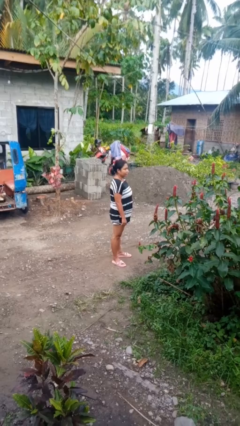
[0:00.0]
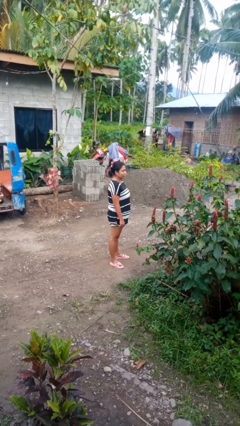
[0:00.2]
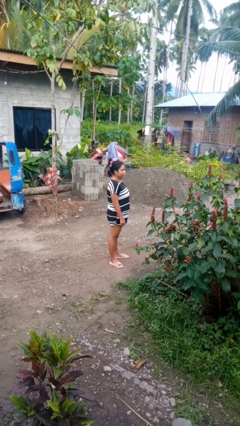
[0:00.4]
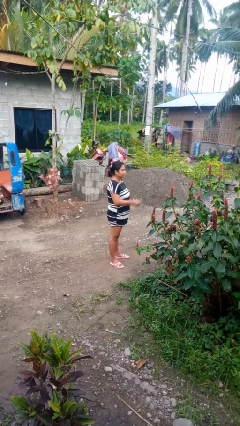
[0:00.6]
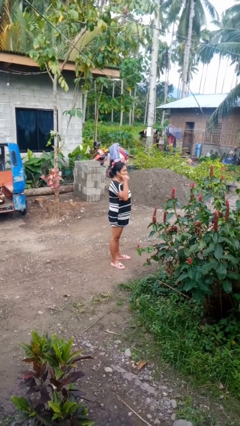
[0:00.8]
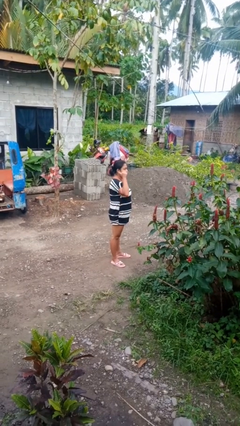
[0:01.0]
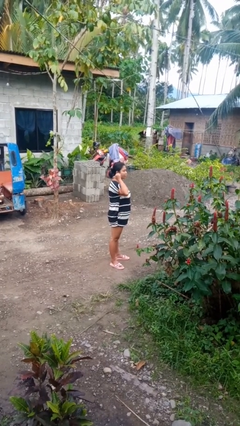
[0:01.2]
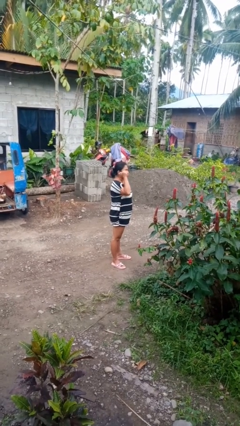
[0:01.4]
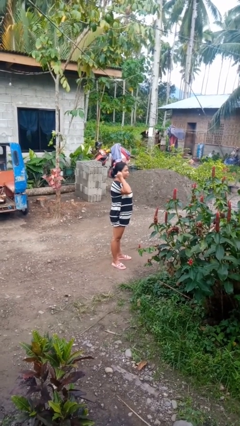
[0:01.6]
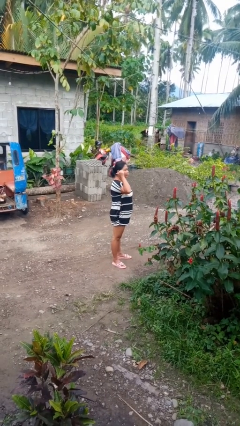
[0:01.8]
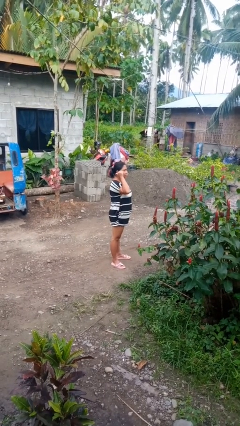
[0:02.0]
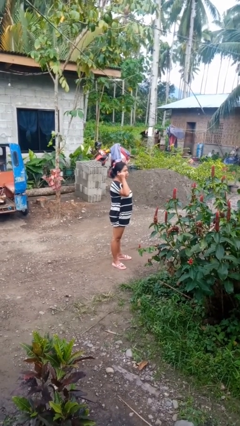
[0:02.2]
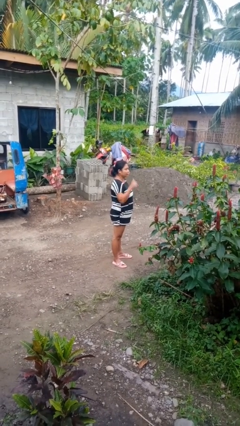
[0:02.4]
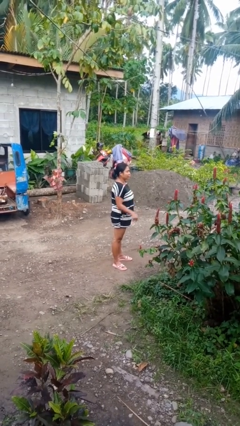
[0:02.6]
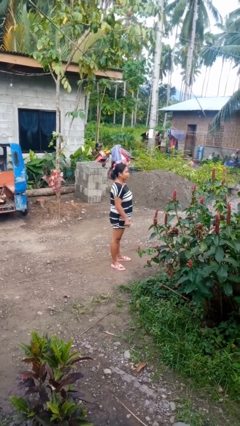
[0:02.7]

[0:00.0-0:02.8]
person gestures behind me

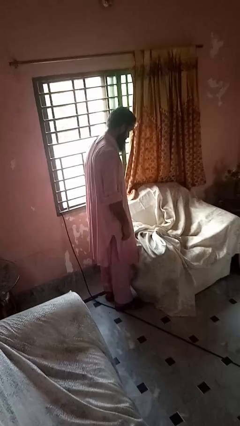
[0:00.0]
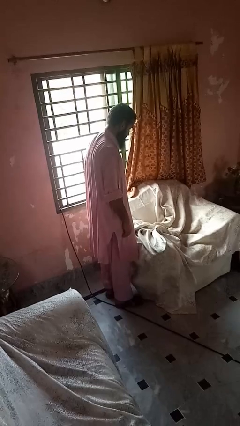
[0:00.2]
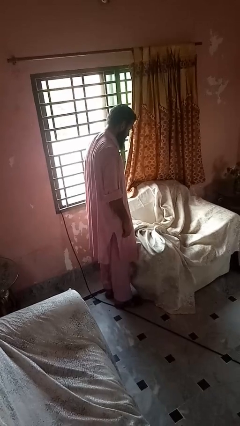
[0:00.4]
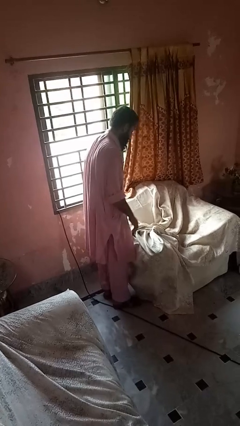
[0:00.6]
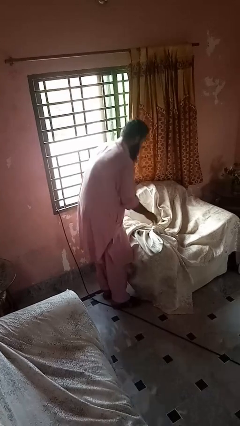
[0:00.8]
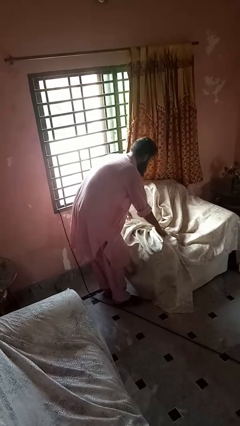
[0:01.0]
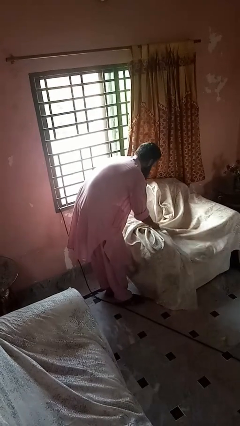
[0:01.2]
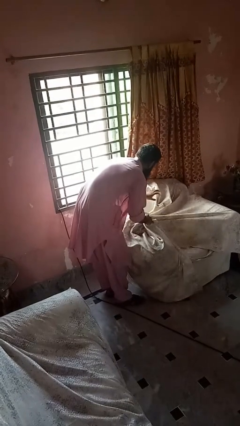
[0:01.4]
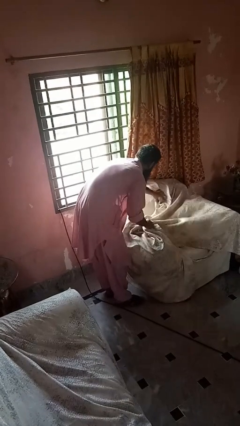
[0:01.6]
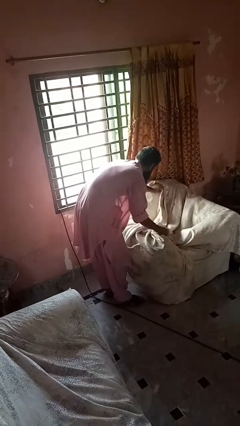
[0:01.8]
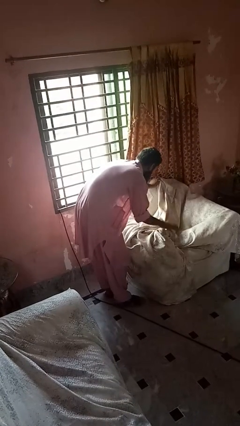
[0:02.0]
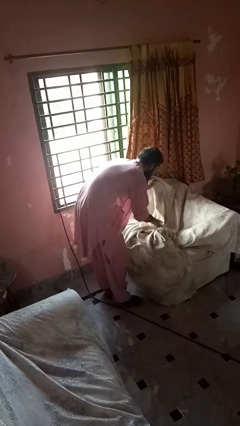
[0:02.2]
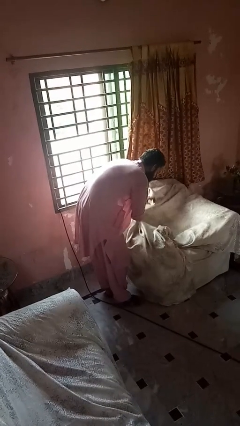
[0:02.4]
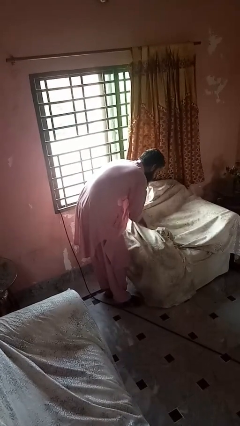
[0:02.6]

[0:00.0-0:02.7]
person searches in couch

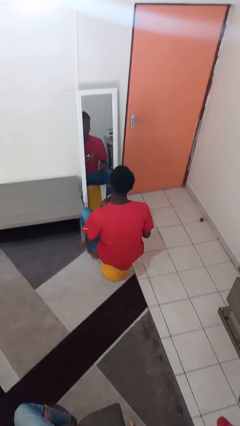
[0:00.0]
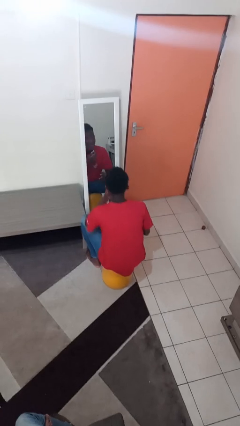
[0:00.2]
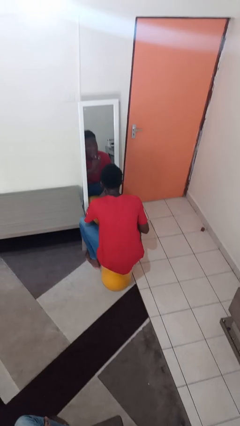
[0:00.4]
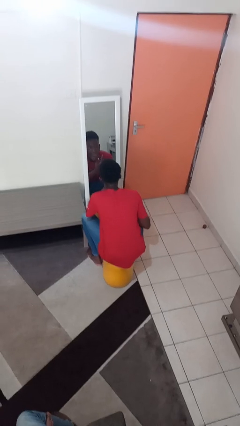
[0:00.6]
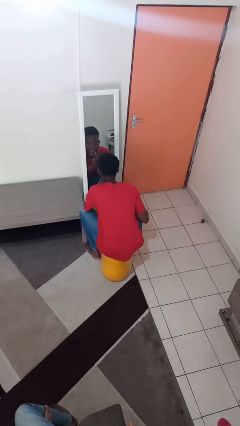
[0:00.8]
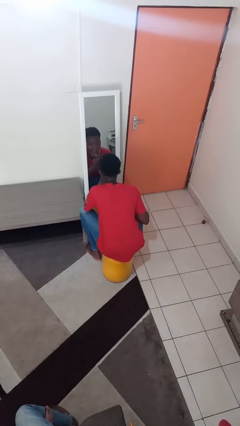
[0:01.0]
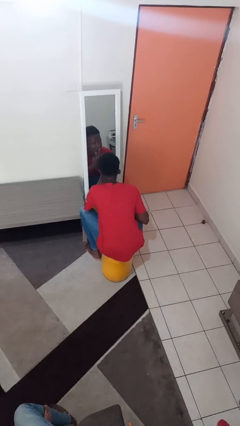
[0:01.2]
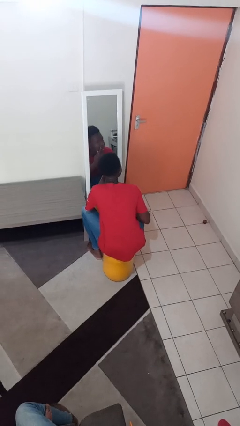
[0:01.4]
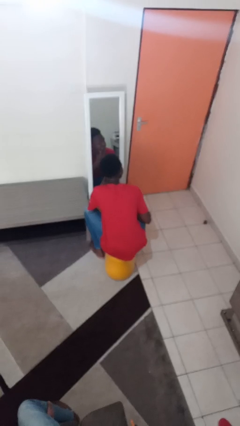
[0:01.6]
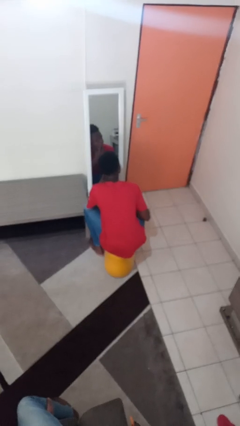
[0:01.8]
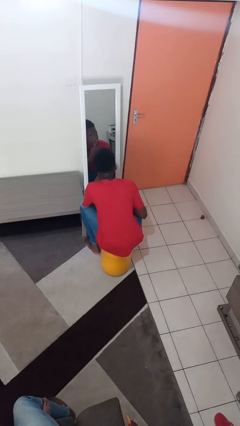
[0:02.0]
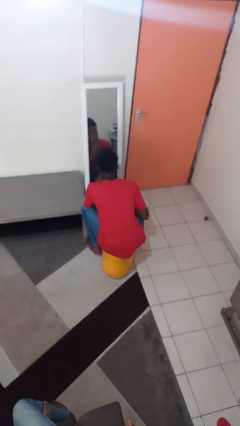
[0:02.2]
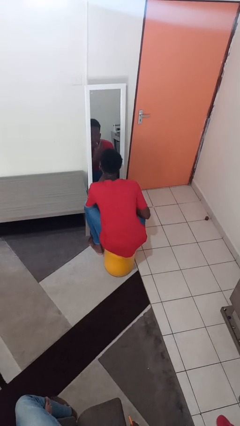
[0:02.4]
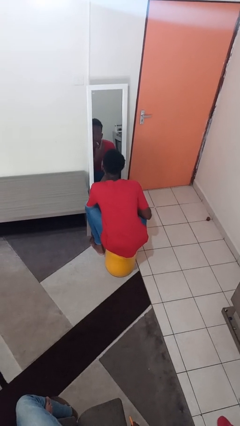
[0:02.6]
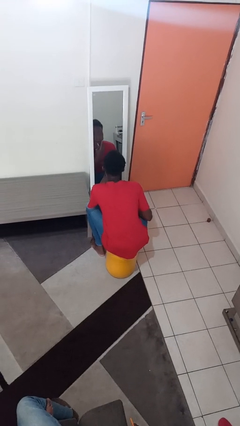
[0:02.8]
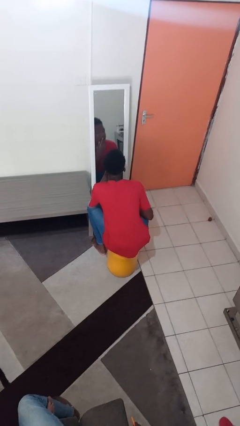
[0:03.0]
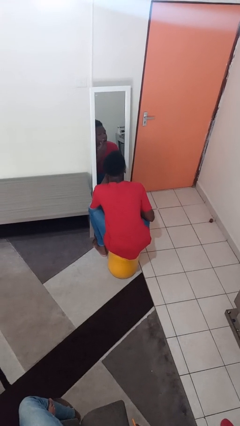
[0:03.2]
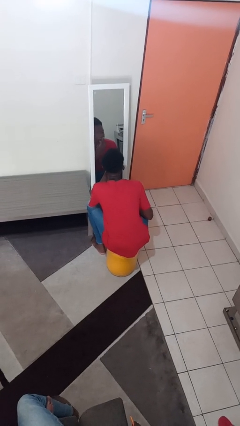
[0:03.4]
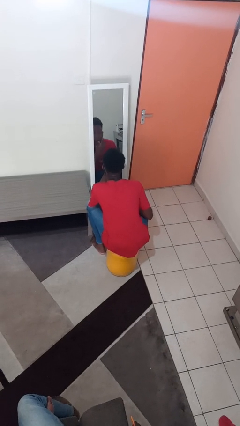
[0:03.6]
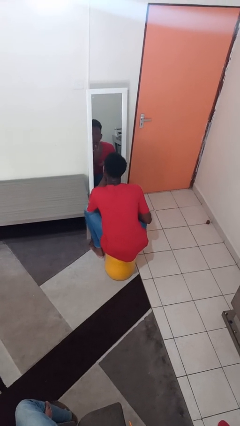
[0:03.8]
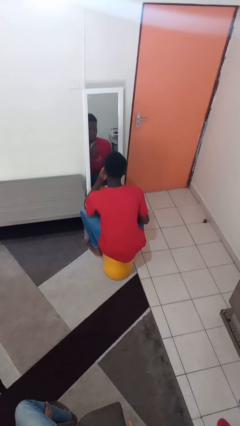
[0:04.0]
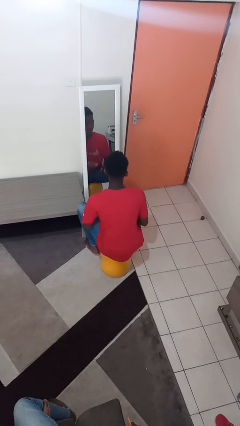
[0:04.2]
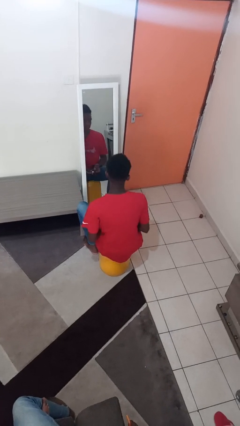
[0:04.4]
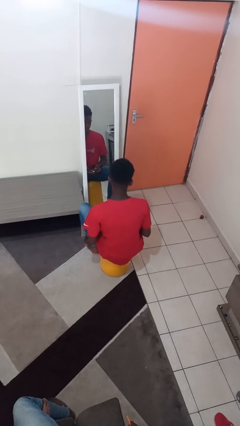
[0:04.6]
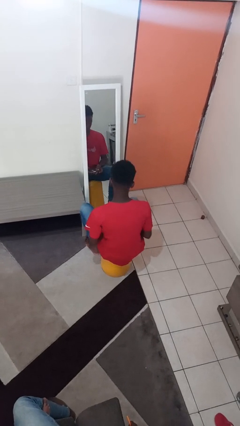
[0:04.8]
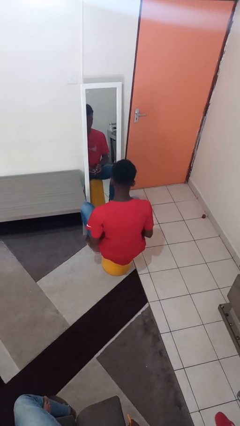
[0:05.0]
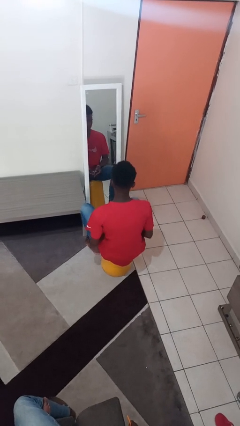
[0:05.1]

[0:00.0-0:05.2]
person applies lip makeup

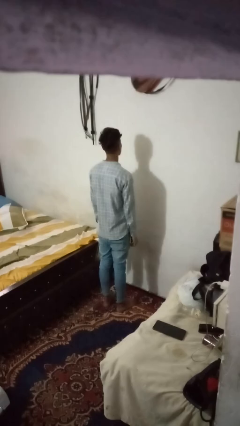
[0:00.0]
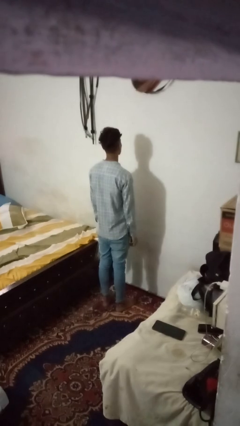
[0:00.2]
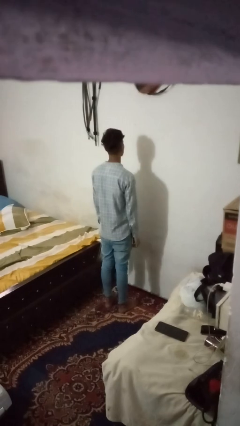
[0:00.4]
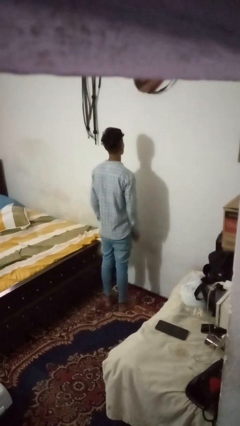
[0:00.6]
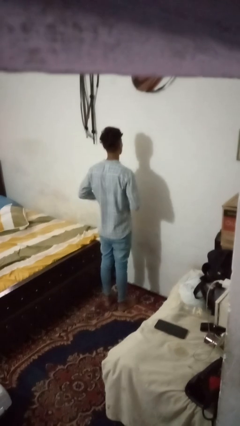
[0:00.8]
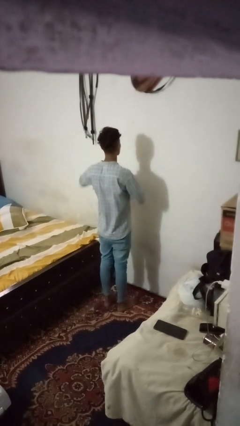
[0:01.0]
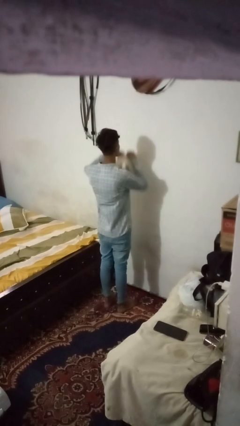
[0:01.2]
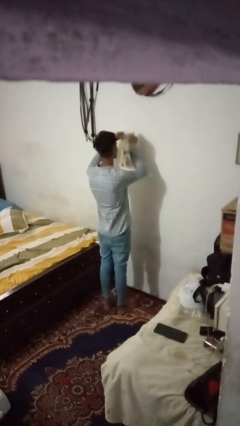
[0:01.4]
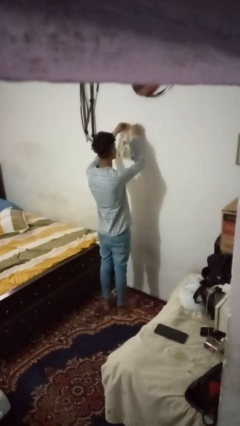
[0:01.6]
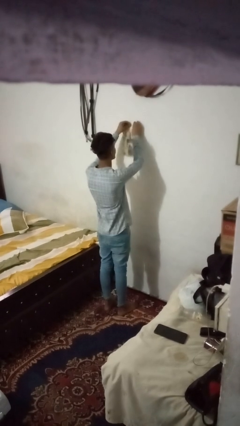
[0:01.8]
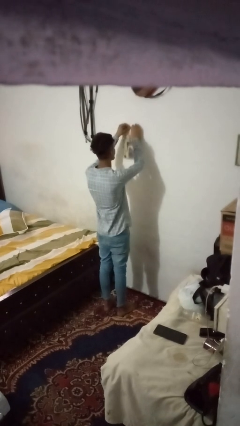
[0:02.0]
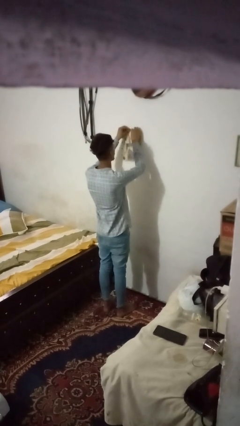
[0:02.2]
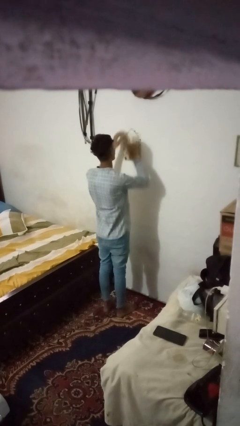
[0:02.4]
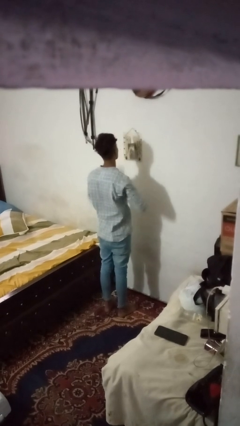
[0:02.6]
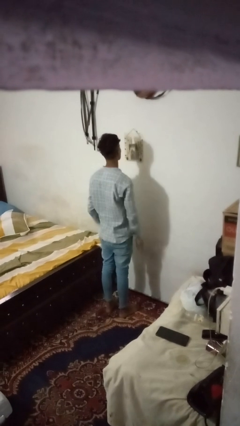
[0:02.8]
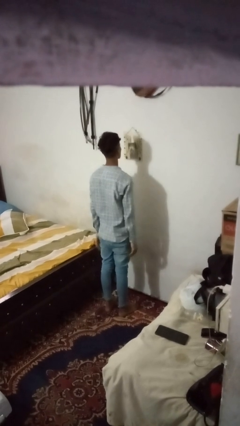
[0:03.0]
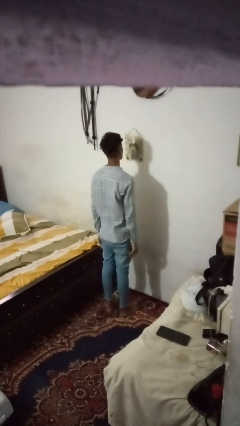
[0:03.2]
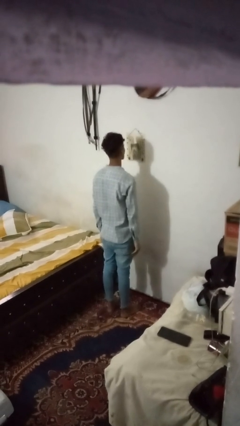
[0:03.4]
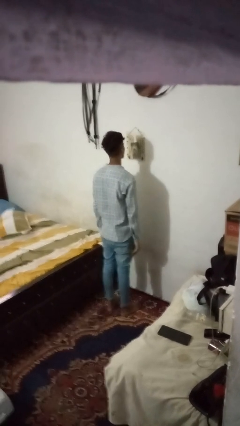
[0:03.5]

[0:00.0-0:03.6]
person puts up picture frame

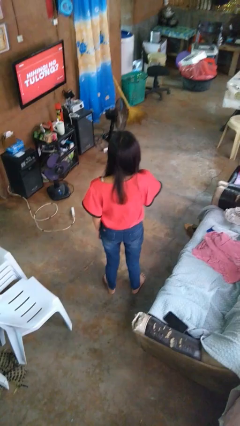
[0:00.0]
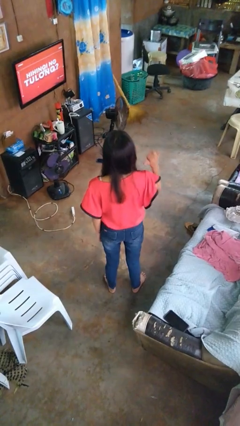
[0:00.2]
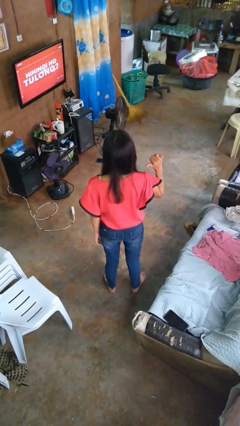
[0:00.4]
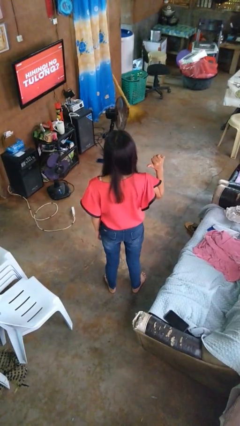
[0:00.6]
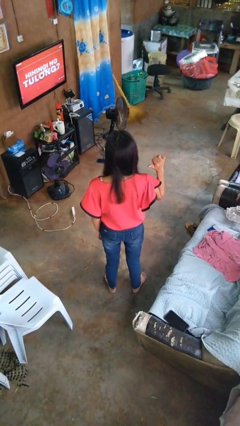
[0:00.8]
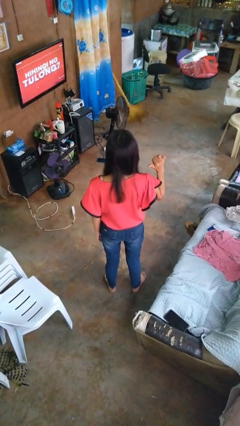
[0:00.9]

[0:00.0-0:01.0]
person gestures cut

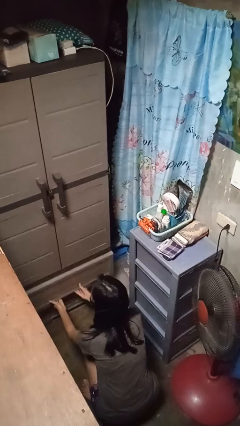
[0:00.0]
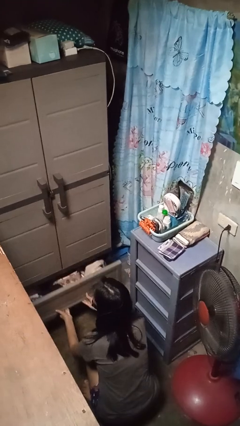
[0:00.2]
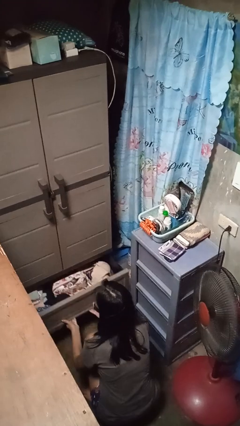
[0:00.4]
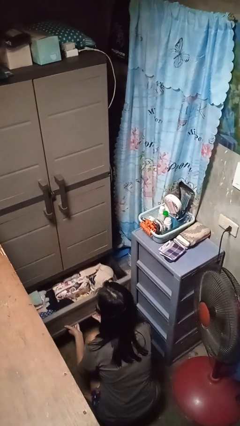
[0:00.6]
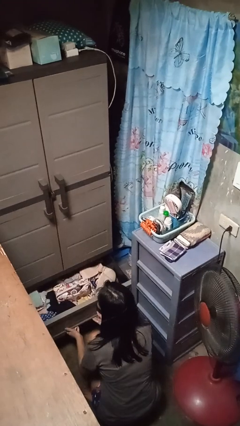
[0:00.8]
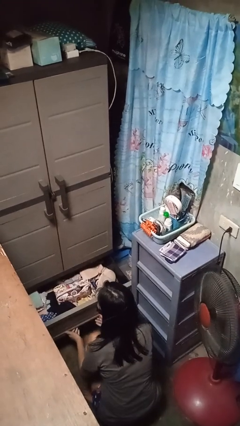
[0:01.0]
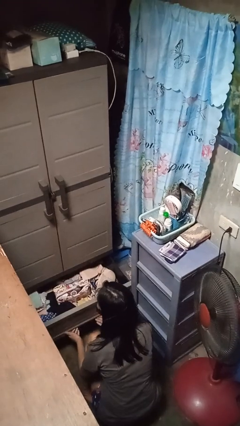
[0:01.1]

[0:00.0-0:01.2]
person opens dresser drawer

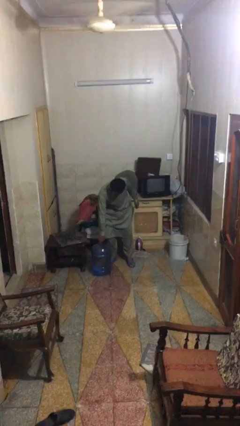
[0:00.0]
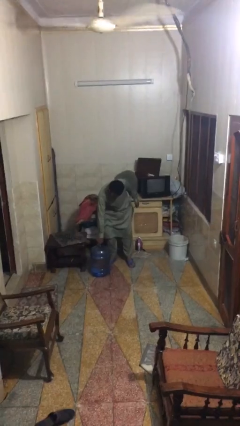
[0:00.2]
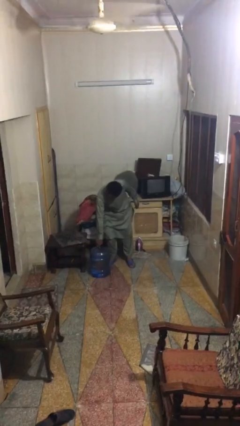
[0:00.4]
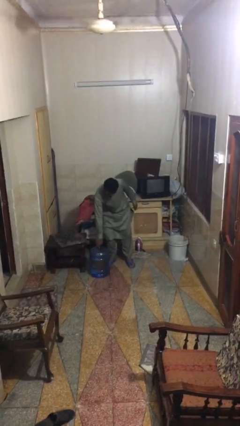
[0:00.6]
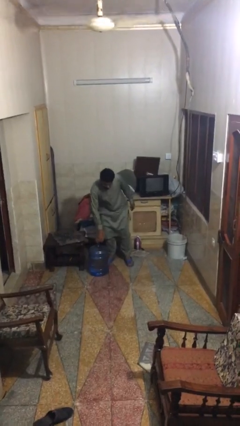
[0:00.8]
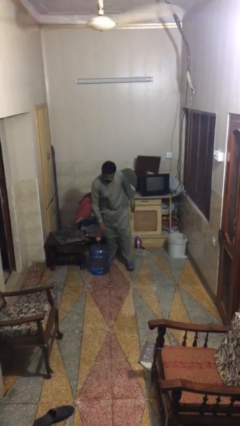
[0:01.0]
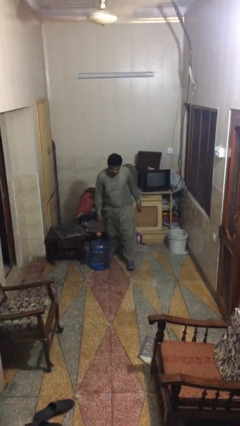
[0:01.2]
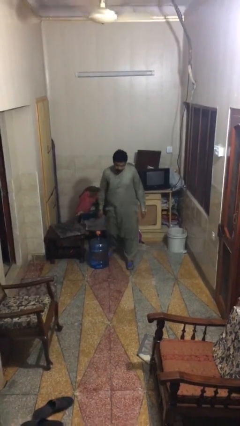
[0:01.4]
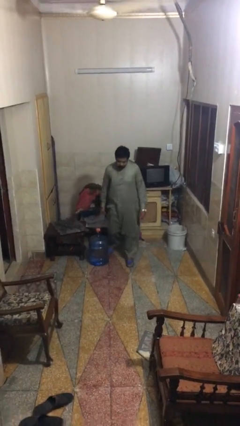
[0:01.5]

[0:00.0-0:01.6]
person puts down object on floor
